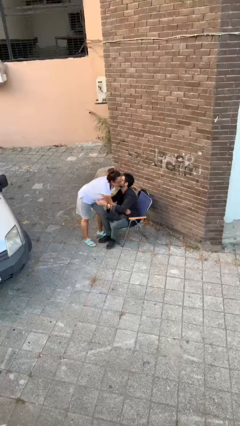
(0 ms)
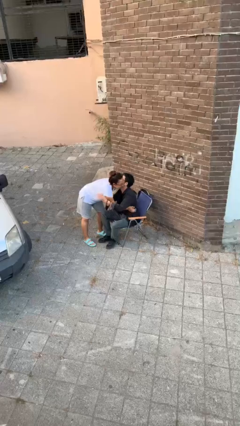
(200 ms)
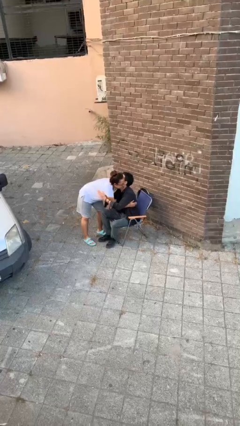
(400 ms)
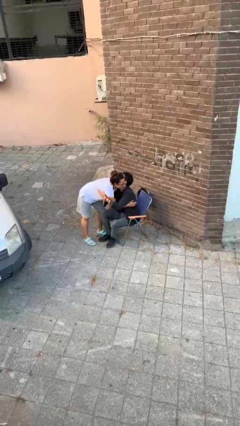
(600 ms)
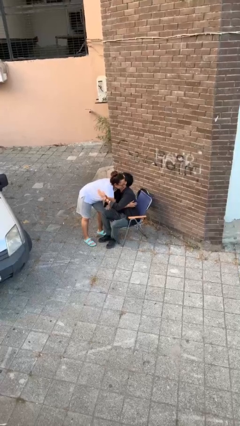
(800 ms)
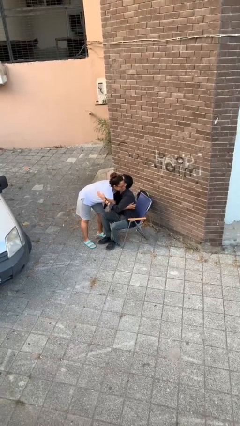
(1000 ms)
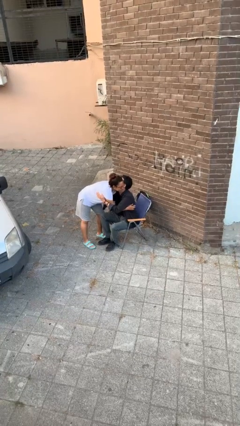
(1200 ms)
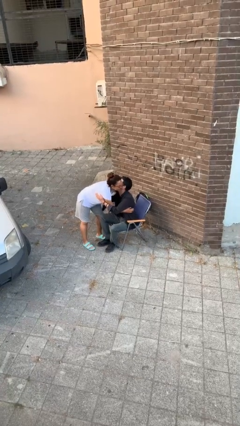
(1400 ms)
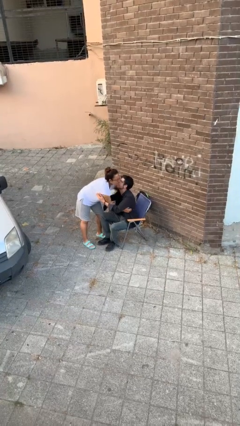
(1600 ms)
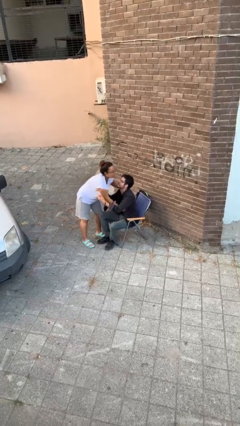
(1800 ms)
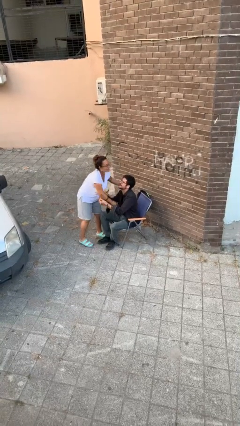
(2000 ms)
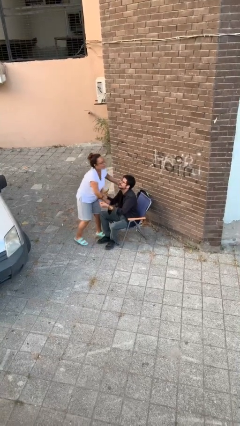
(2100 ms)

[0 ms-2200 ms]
person embraces person

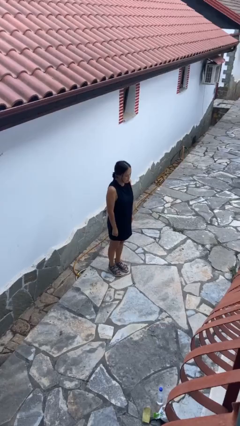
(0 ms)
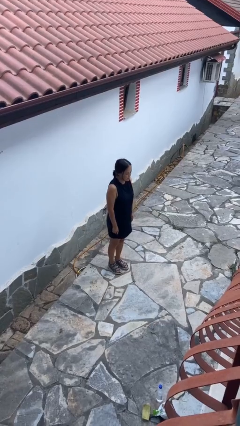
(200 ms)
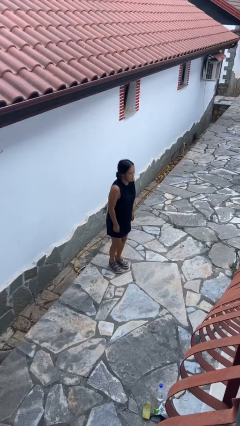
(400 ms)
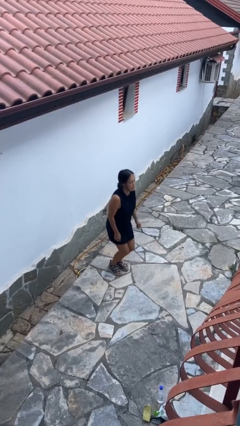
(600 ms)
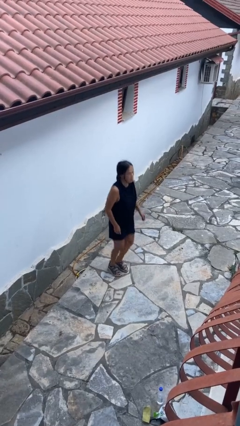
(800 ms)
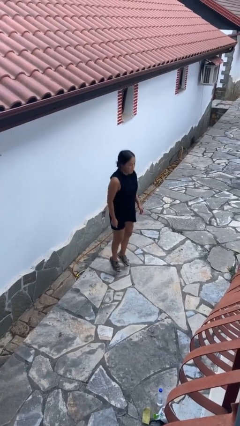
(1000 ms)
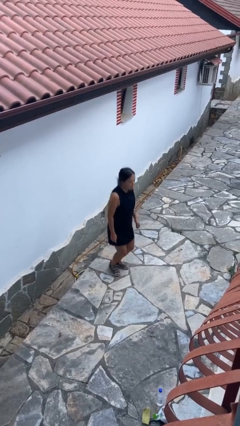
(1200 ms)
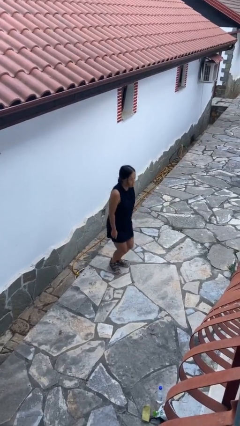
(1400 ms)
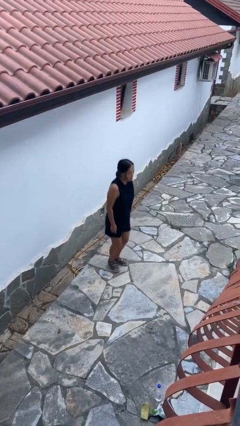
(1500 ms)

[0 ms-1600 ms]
person jumps

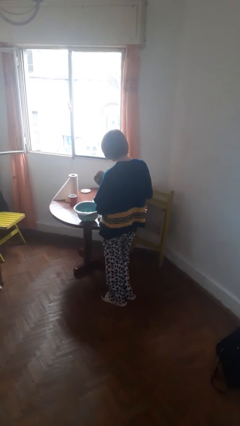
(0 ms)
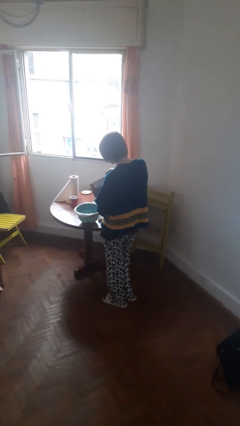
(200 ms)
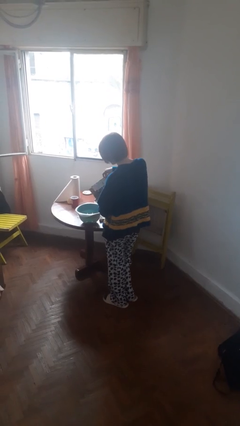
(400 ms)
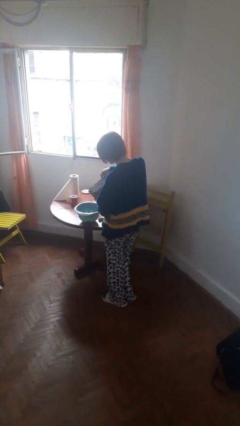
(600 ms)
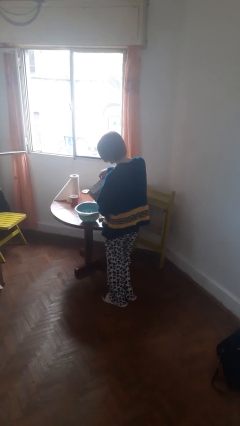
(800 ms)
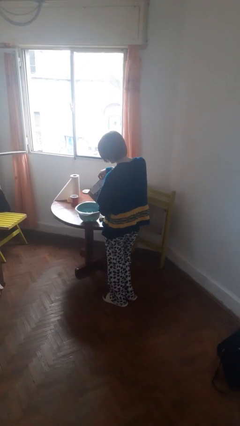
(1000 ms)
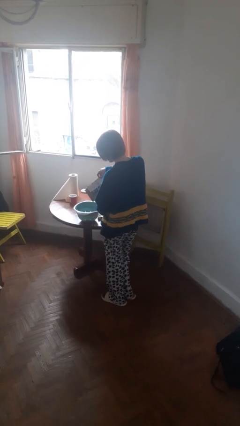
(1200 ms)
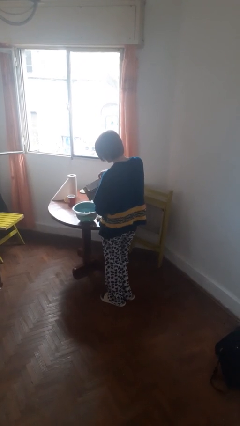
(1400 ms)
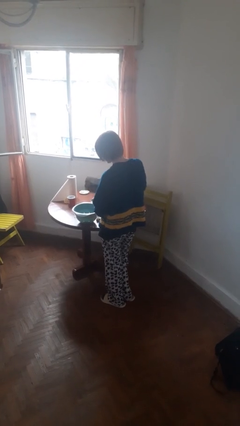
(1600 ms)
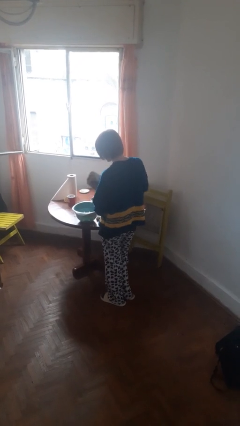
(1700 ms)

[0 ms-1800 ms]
person pours into bowl

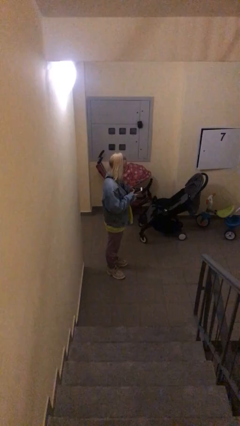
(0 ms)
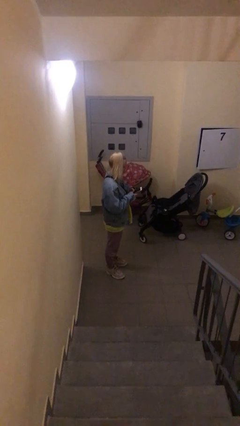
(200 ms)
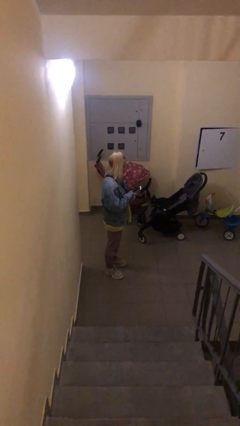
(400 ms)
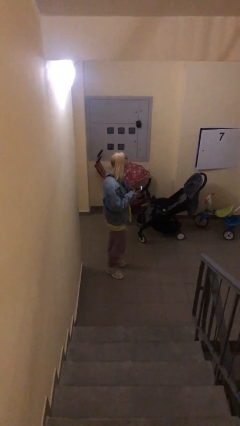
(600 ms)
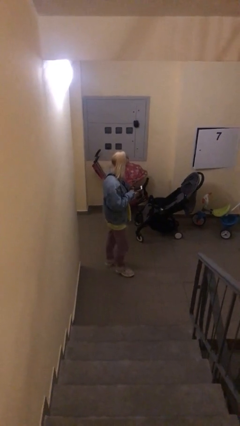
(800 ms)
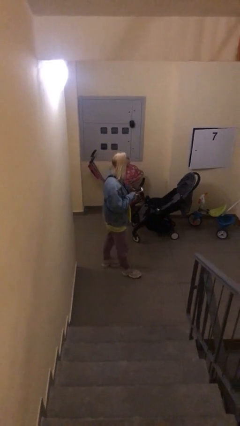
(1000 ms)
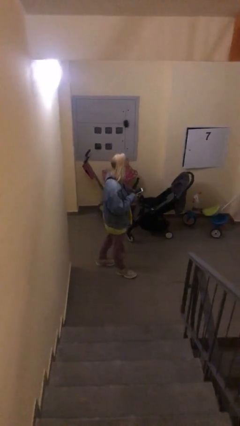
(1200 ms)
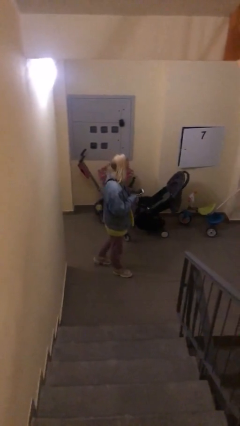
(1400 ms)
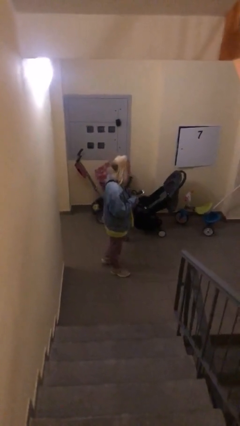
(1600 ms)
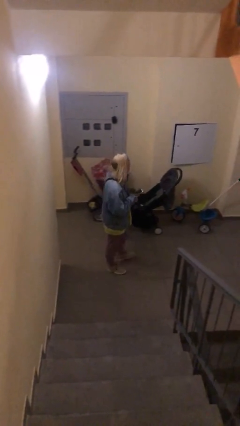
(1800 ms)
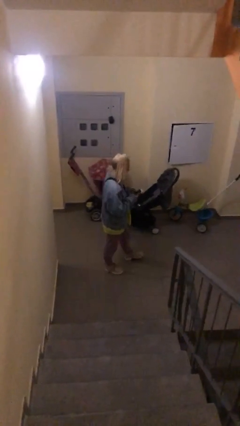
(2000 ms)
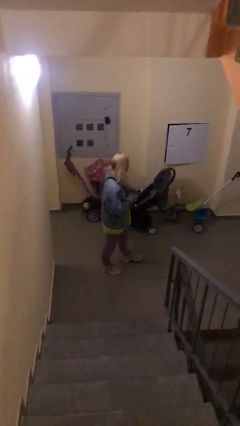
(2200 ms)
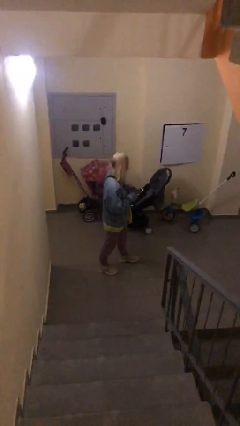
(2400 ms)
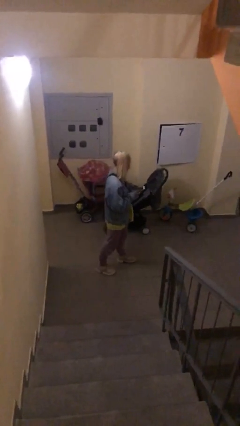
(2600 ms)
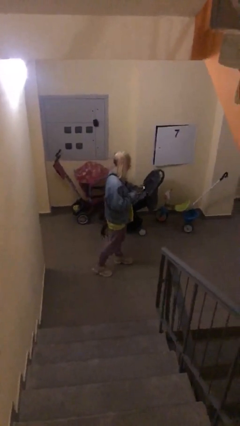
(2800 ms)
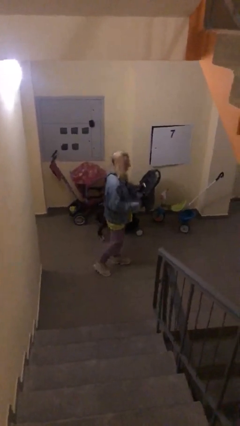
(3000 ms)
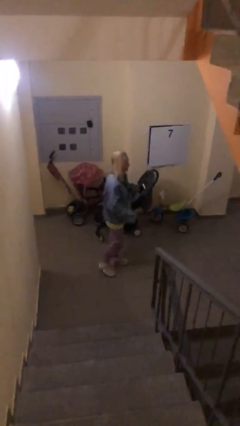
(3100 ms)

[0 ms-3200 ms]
person texts on phone

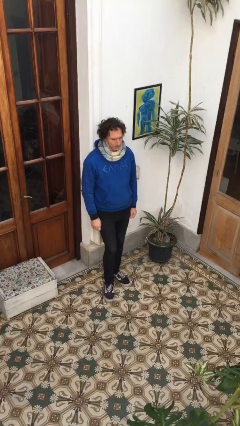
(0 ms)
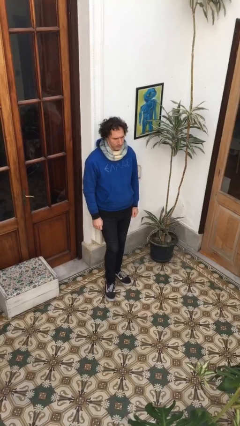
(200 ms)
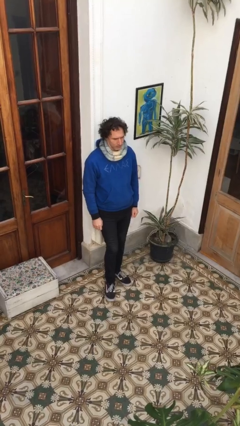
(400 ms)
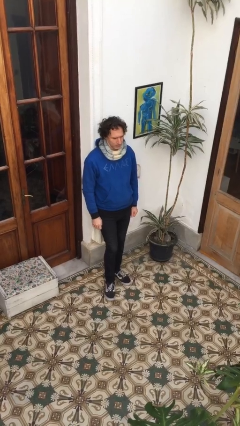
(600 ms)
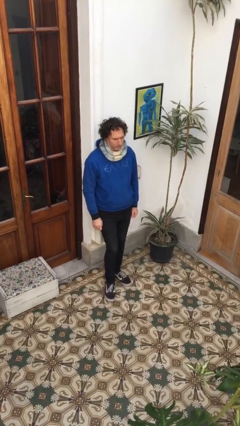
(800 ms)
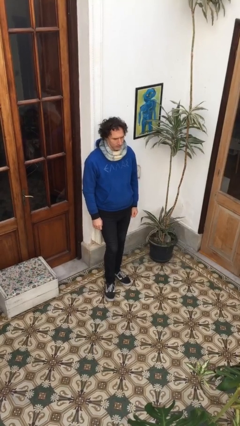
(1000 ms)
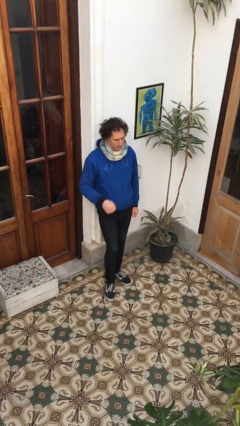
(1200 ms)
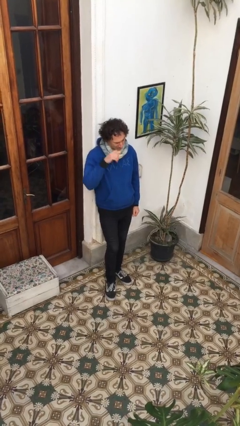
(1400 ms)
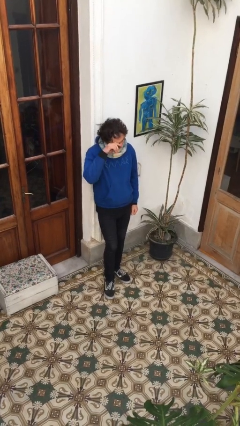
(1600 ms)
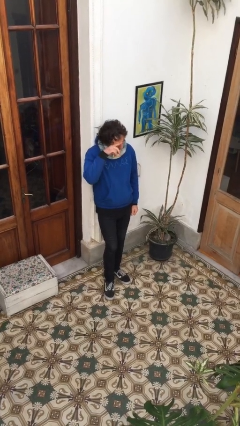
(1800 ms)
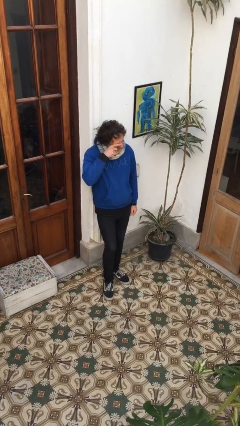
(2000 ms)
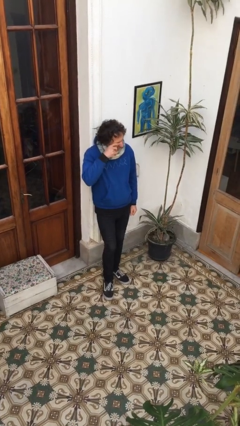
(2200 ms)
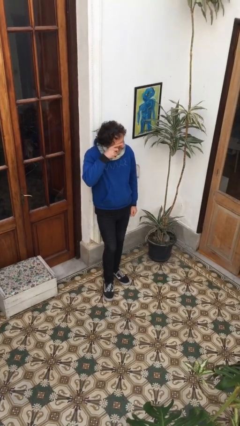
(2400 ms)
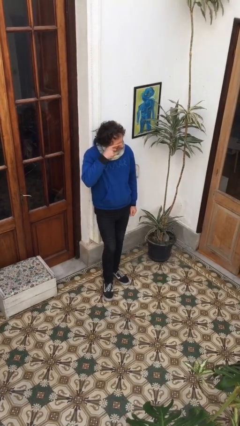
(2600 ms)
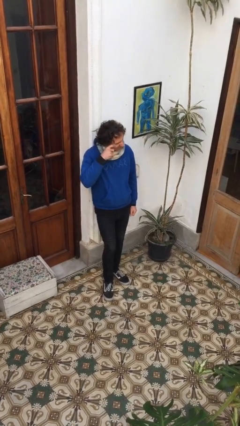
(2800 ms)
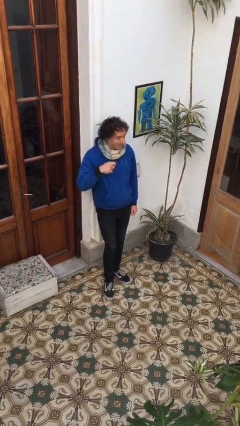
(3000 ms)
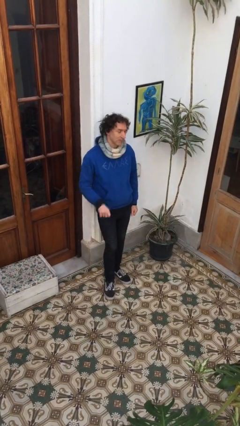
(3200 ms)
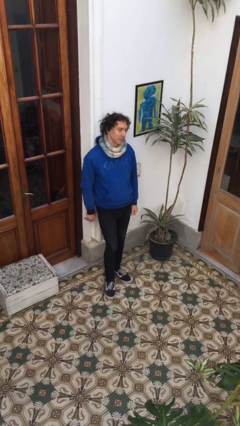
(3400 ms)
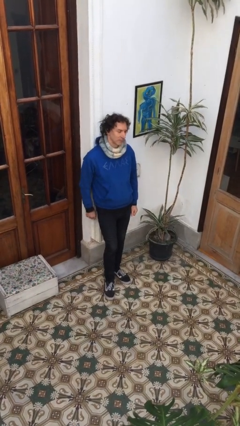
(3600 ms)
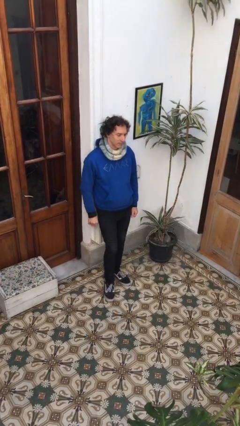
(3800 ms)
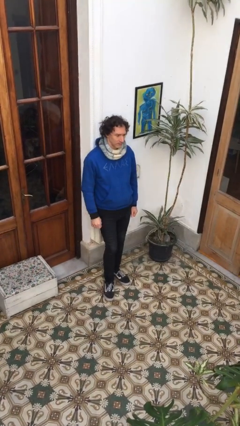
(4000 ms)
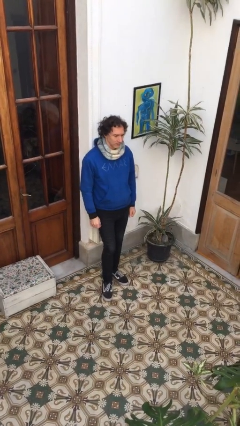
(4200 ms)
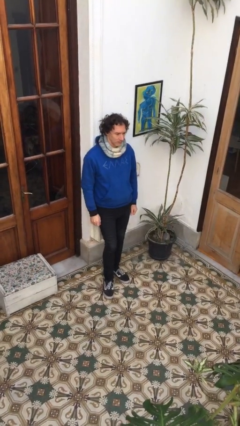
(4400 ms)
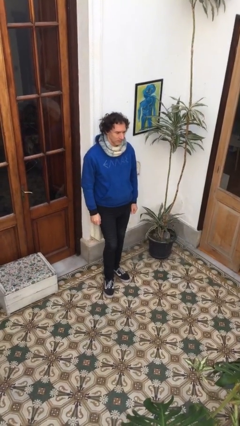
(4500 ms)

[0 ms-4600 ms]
person scratches face

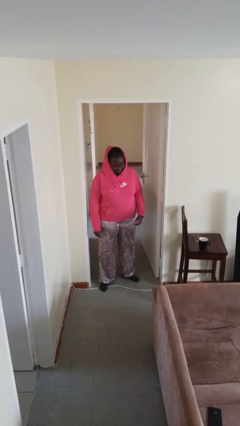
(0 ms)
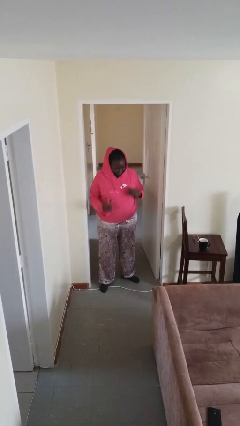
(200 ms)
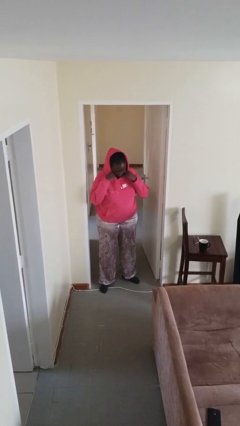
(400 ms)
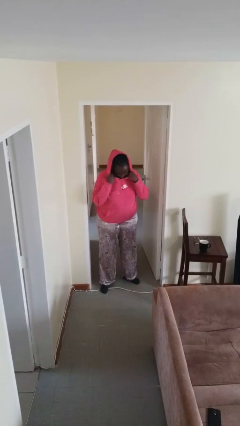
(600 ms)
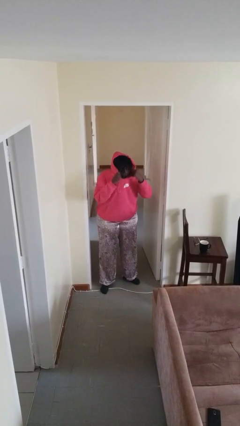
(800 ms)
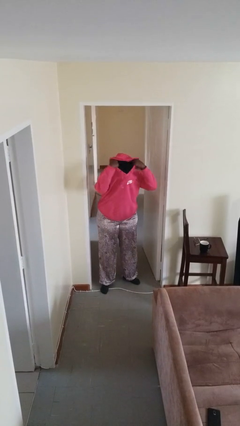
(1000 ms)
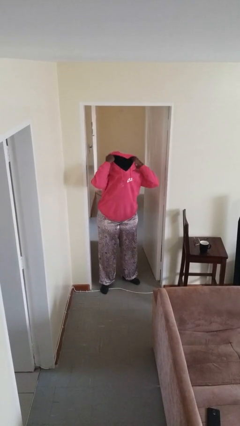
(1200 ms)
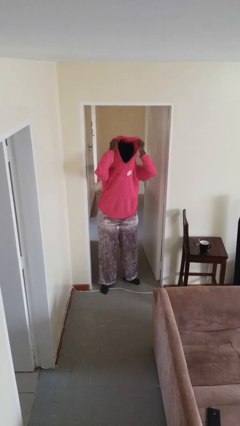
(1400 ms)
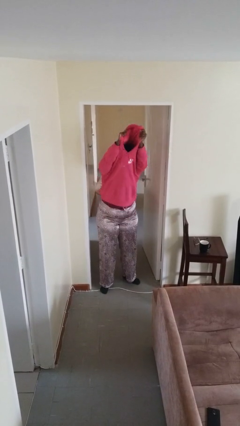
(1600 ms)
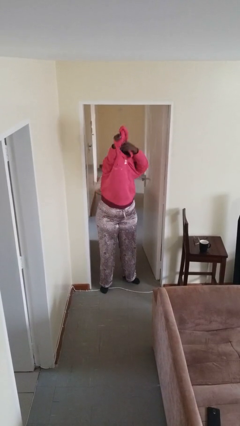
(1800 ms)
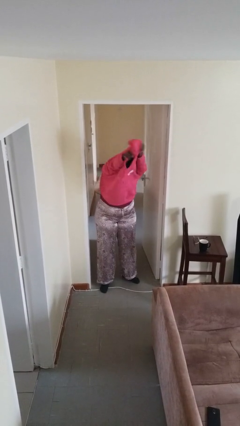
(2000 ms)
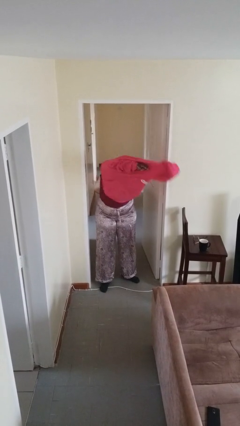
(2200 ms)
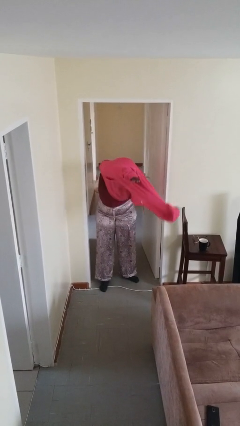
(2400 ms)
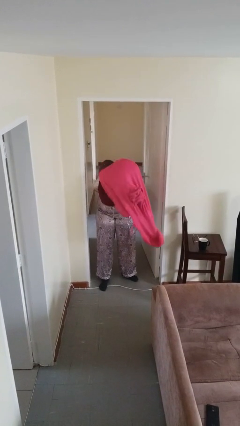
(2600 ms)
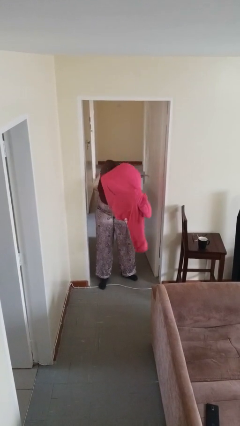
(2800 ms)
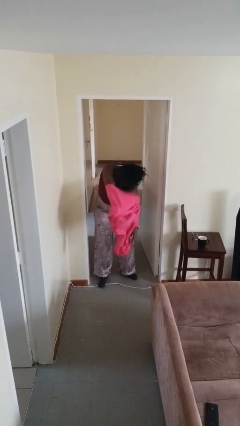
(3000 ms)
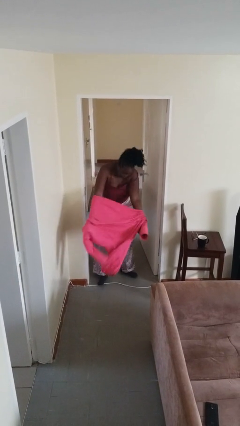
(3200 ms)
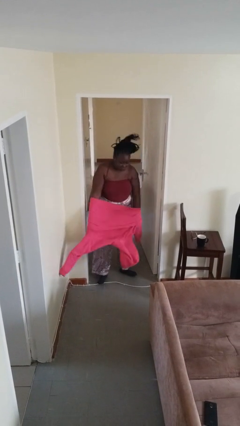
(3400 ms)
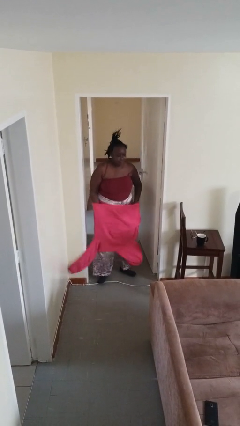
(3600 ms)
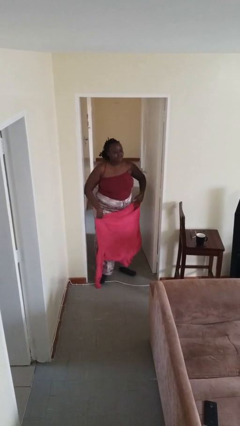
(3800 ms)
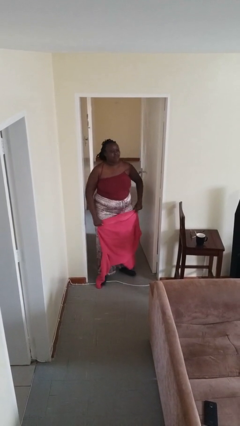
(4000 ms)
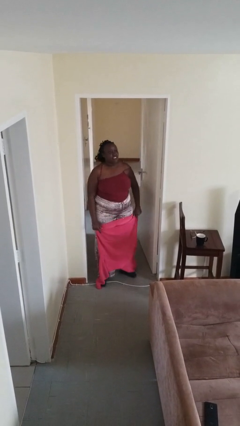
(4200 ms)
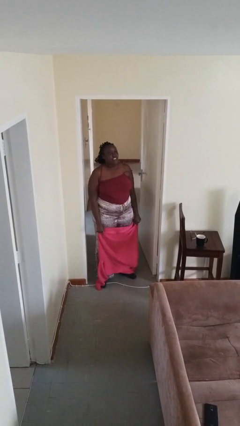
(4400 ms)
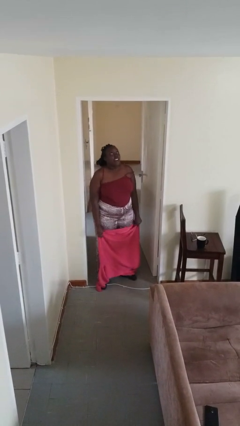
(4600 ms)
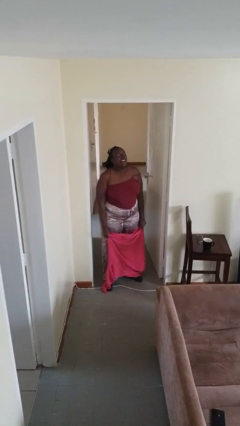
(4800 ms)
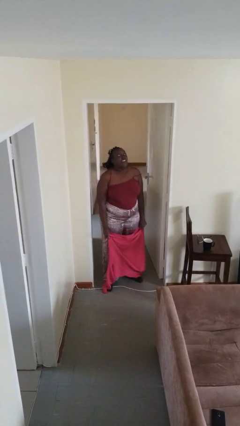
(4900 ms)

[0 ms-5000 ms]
person takes off hoodie
